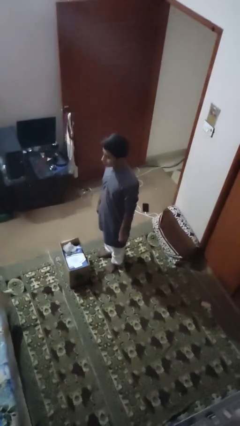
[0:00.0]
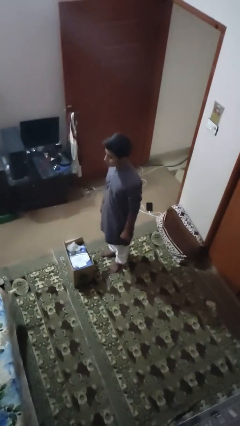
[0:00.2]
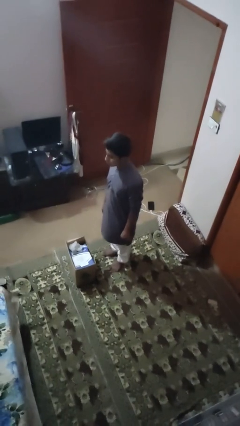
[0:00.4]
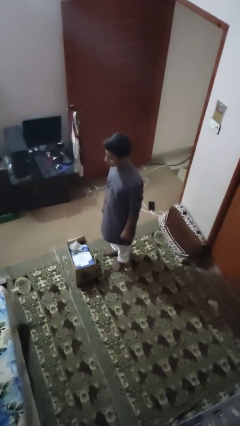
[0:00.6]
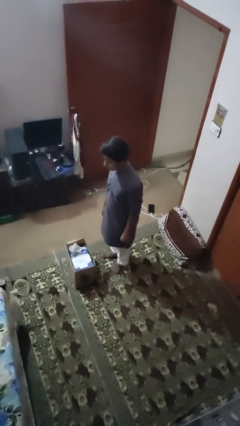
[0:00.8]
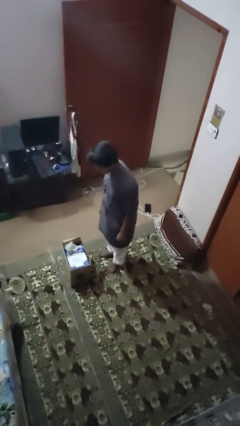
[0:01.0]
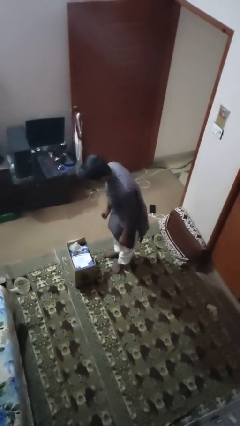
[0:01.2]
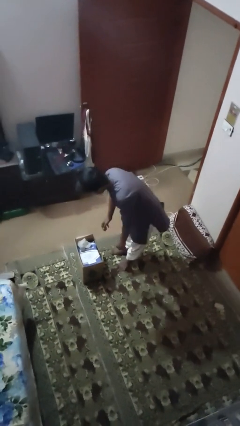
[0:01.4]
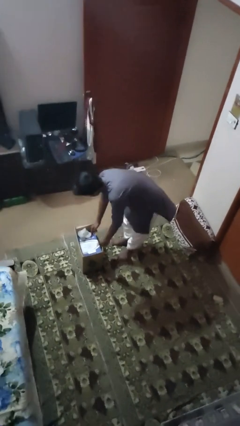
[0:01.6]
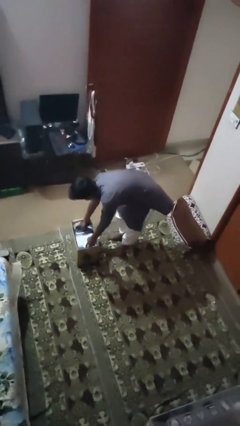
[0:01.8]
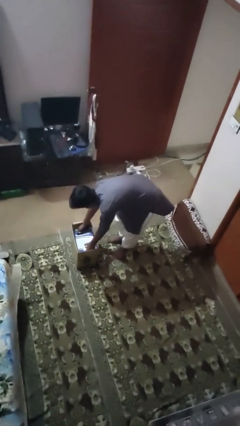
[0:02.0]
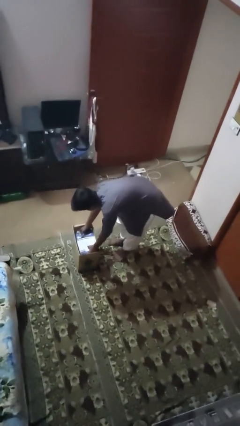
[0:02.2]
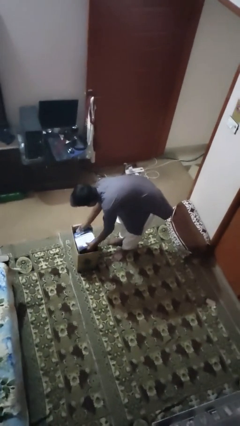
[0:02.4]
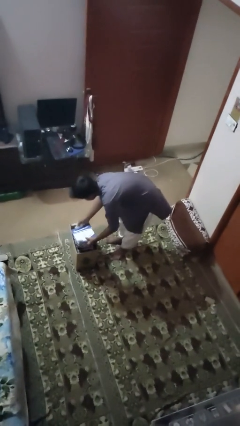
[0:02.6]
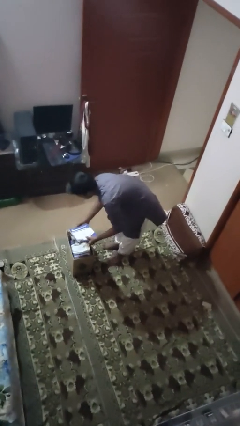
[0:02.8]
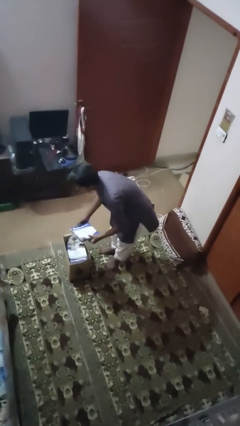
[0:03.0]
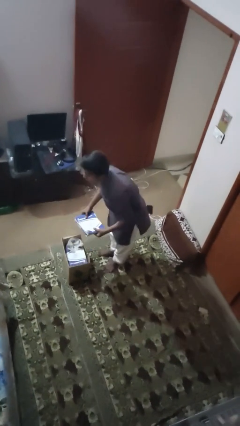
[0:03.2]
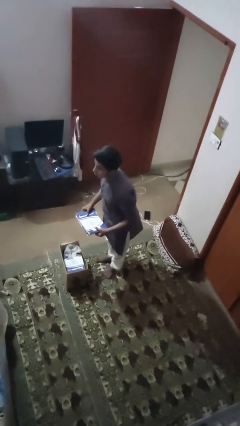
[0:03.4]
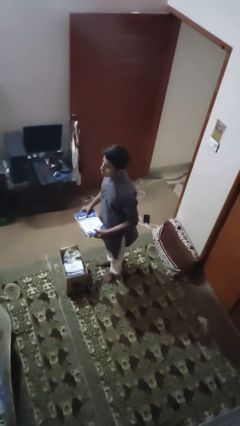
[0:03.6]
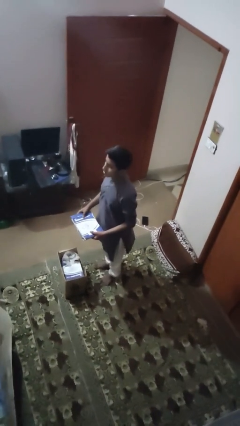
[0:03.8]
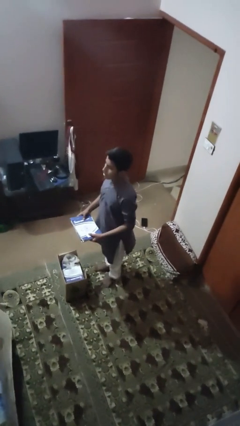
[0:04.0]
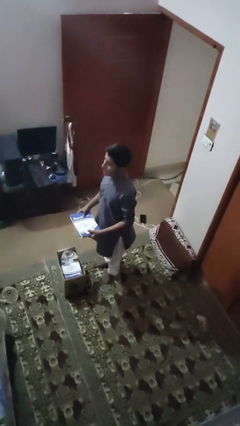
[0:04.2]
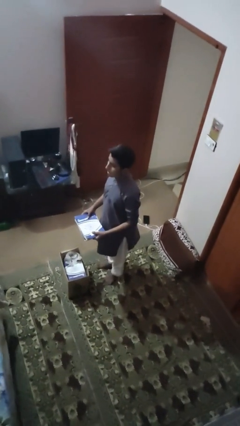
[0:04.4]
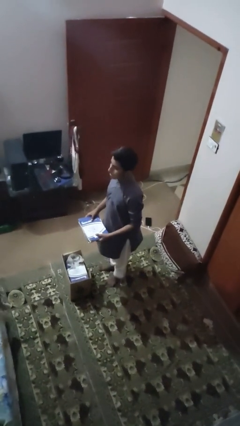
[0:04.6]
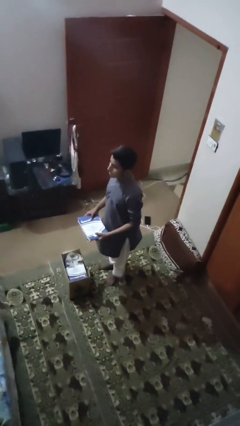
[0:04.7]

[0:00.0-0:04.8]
person takes object from box

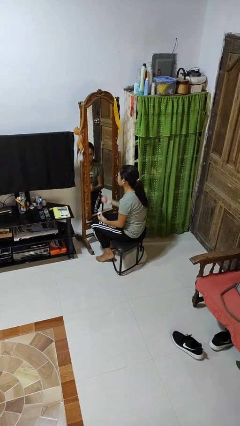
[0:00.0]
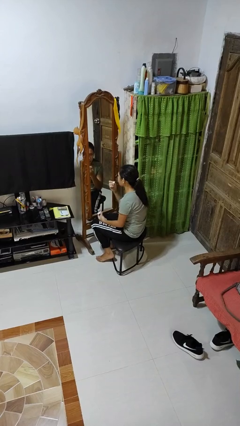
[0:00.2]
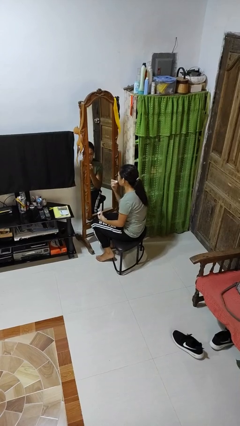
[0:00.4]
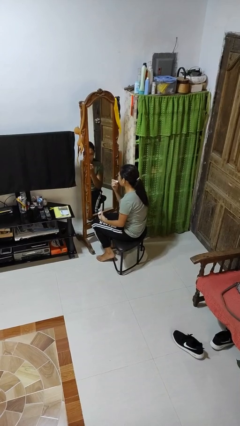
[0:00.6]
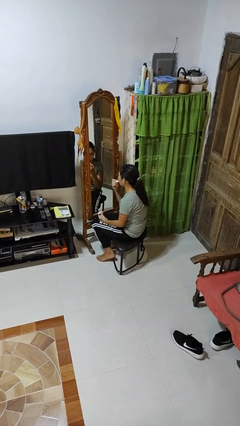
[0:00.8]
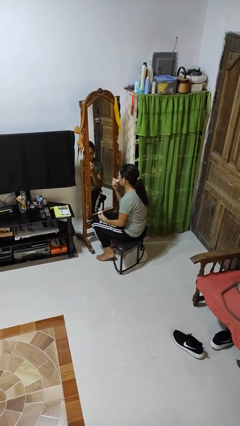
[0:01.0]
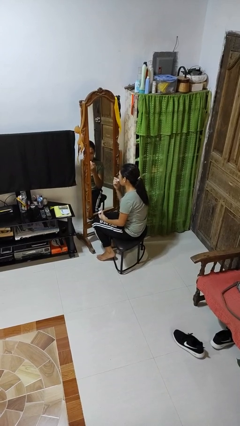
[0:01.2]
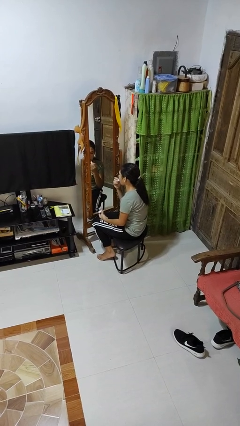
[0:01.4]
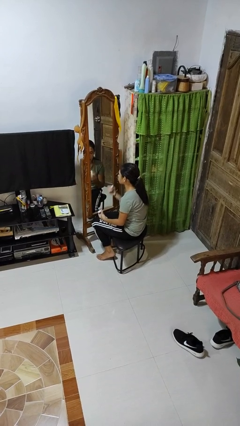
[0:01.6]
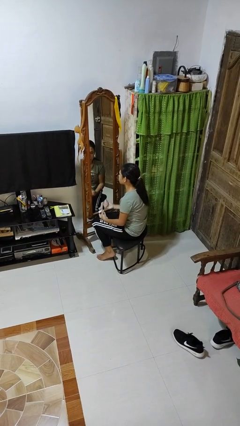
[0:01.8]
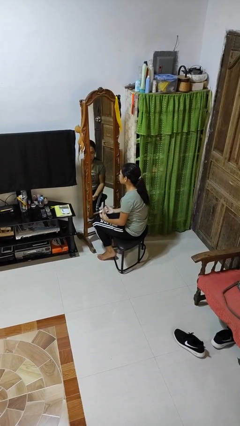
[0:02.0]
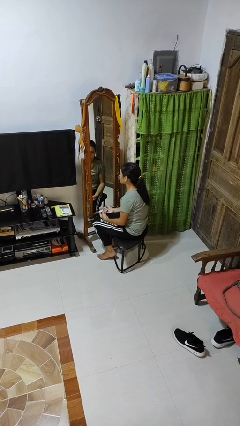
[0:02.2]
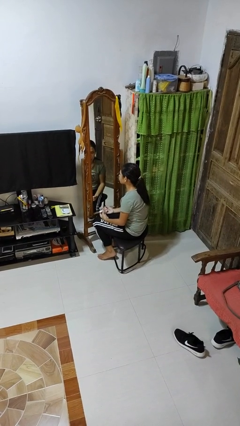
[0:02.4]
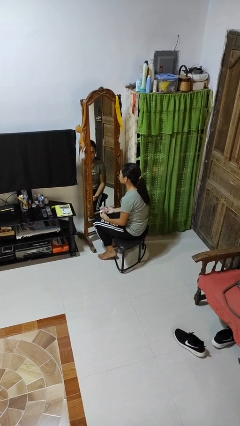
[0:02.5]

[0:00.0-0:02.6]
person applies lip makeup

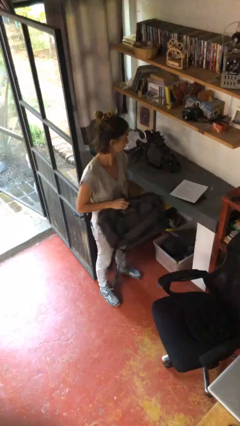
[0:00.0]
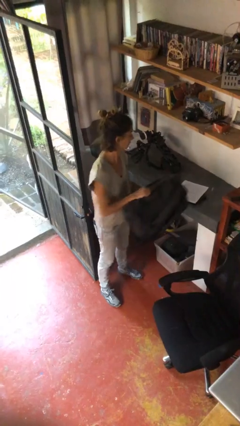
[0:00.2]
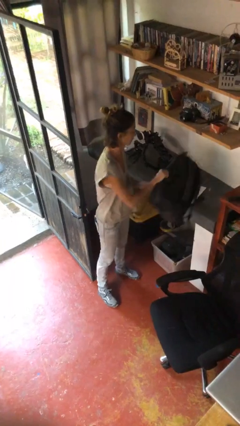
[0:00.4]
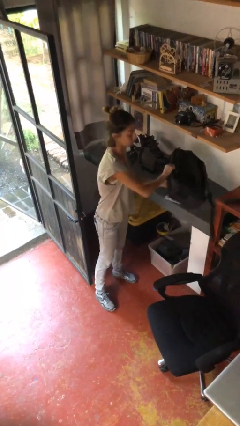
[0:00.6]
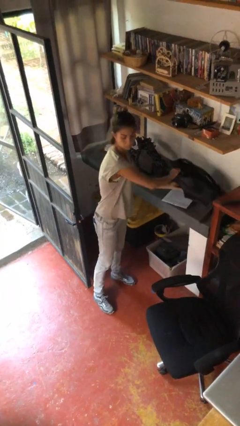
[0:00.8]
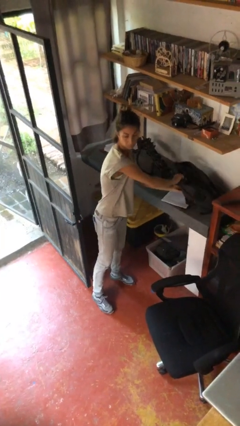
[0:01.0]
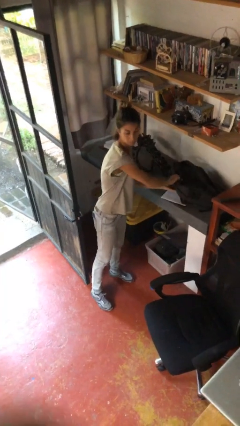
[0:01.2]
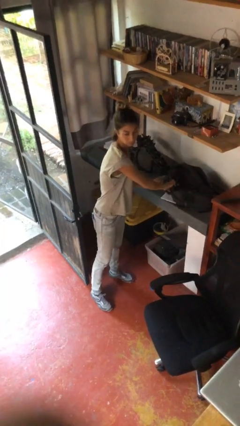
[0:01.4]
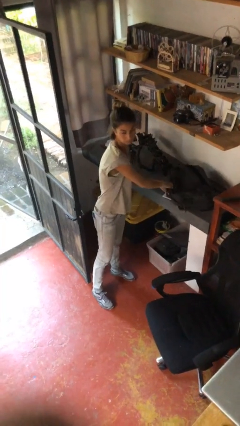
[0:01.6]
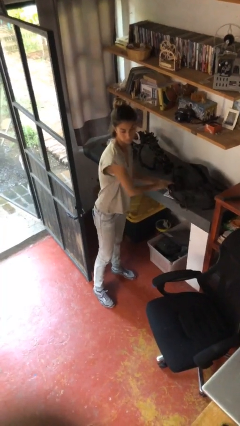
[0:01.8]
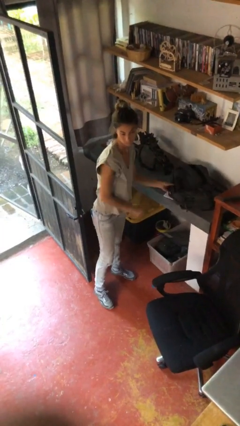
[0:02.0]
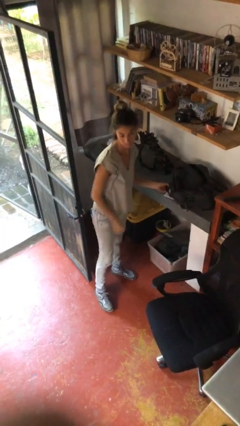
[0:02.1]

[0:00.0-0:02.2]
person puts down object on table

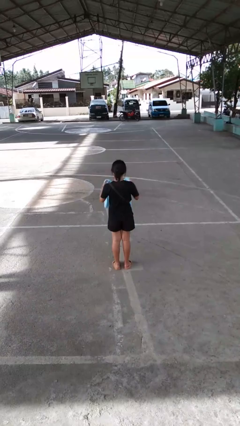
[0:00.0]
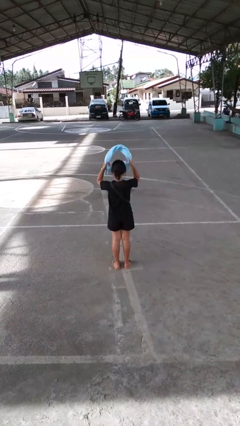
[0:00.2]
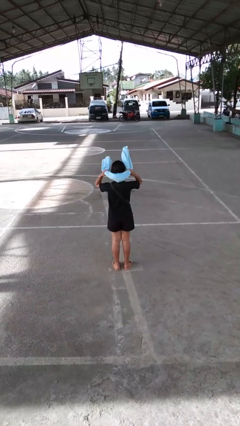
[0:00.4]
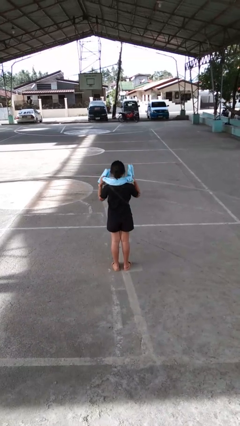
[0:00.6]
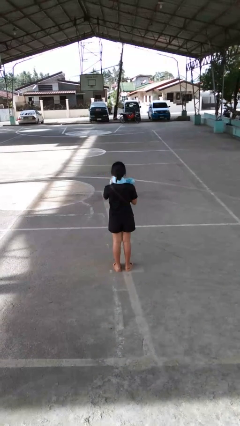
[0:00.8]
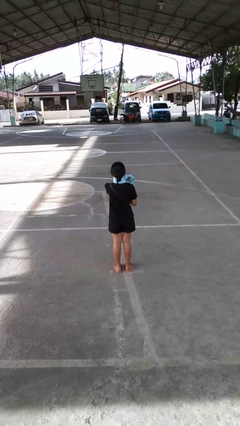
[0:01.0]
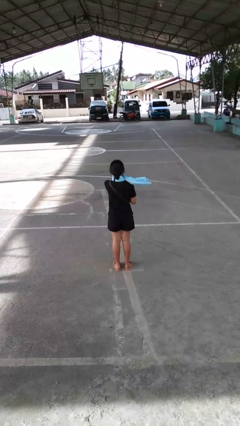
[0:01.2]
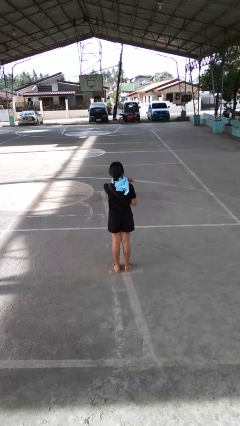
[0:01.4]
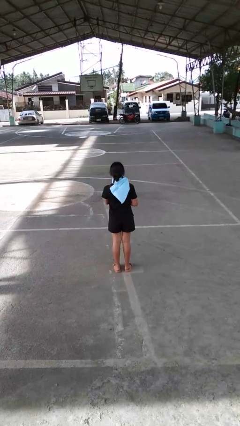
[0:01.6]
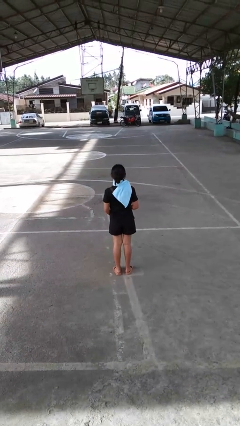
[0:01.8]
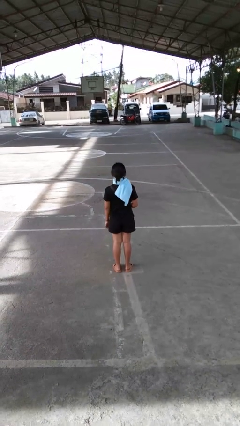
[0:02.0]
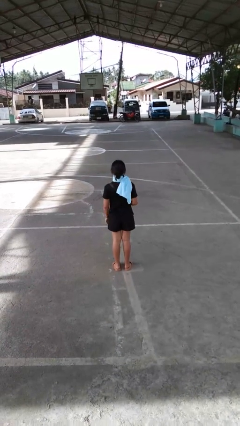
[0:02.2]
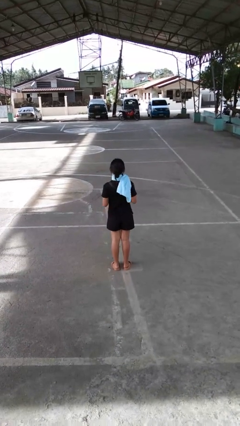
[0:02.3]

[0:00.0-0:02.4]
person puts on scarf

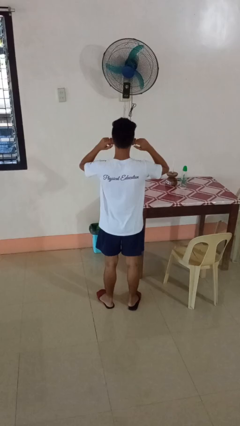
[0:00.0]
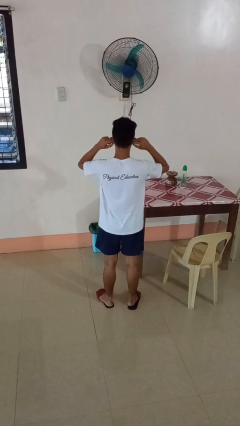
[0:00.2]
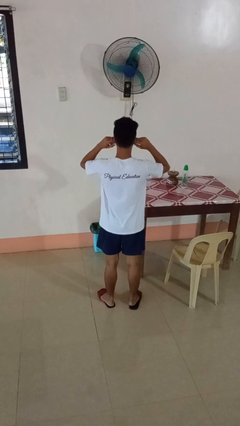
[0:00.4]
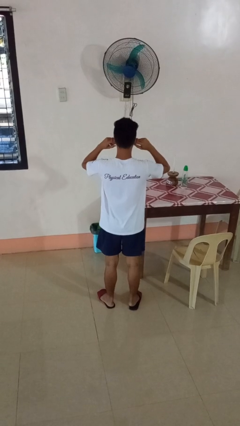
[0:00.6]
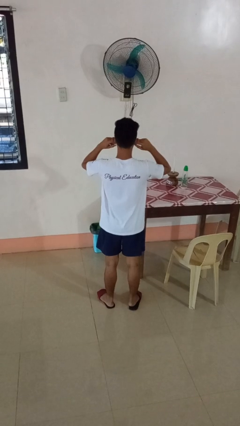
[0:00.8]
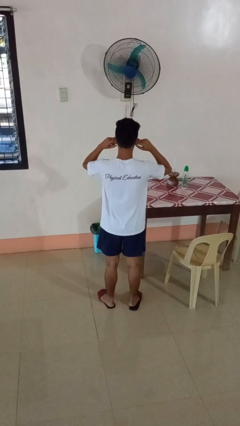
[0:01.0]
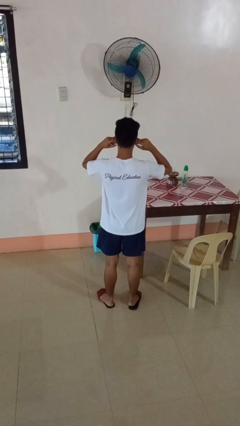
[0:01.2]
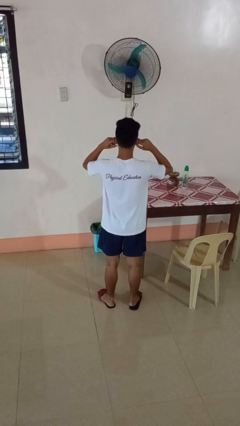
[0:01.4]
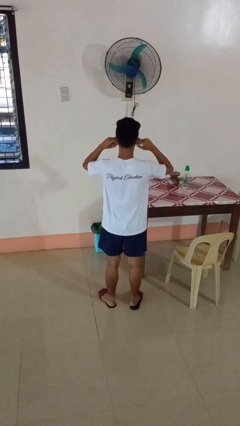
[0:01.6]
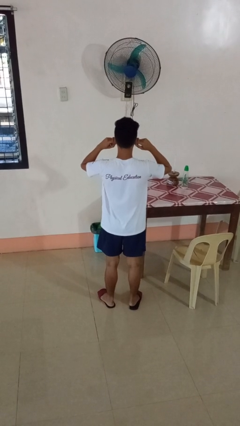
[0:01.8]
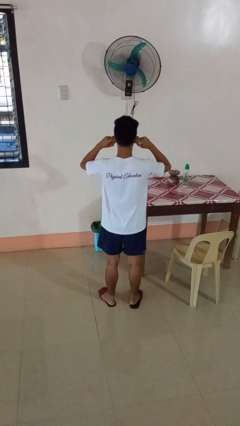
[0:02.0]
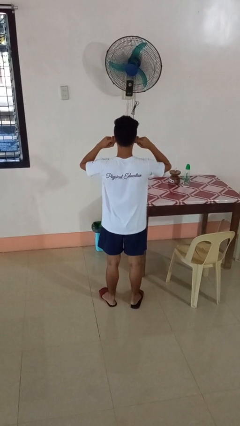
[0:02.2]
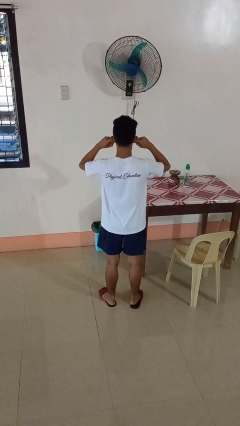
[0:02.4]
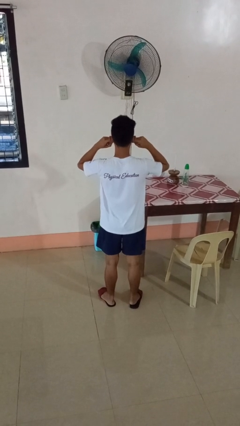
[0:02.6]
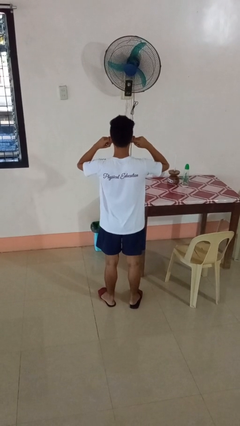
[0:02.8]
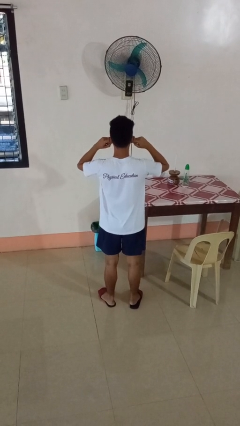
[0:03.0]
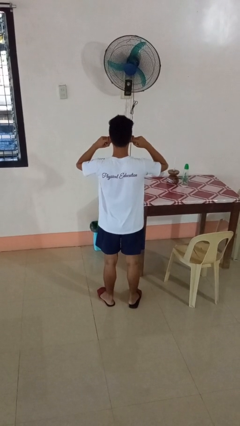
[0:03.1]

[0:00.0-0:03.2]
person puts fingers in ear

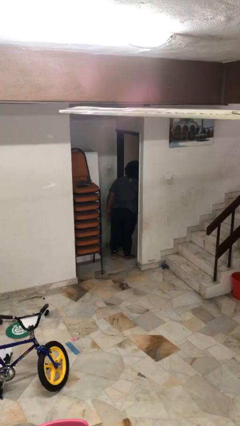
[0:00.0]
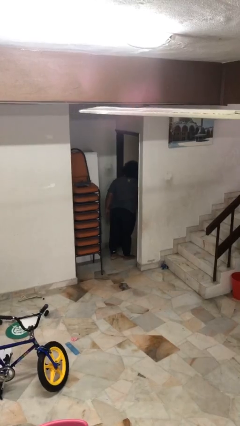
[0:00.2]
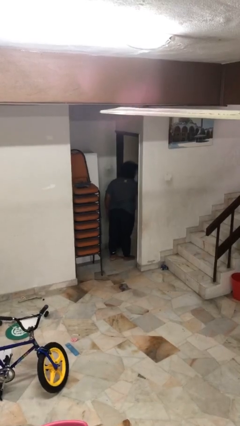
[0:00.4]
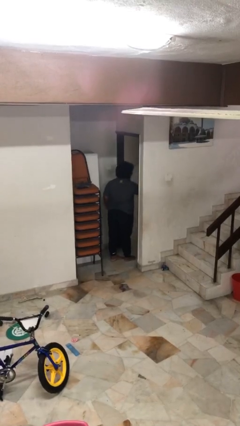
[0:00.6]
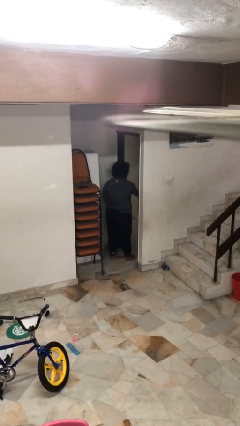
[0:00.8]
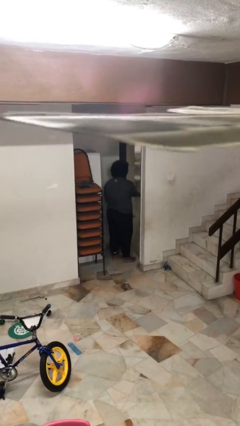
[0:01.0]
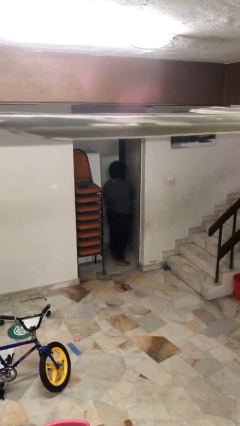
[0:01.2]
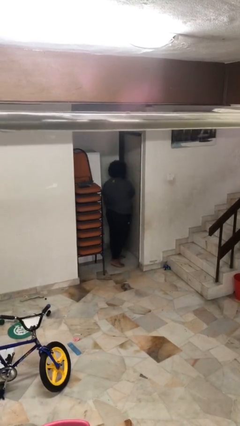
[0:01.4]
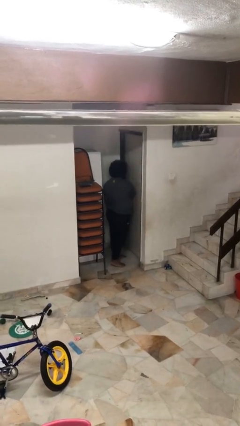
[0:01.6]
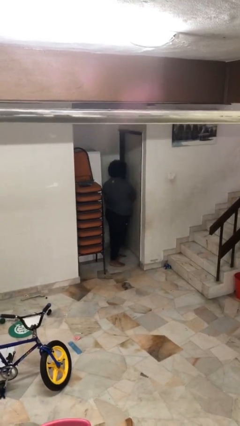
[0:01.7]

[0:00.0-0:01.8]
person closes facility door

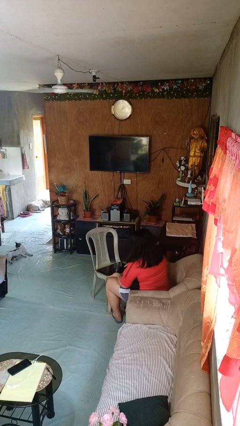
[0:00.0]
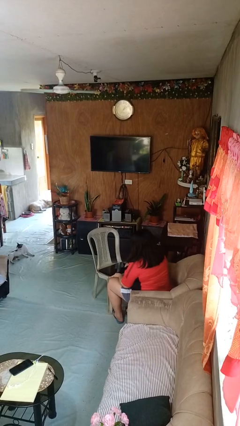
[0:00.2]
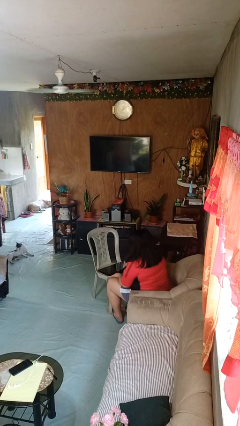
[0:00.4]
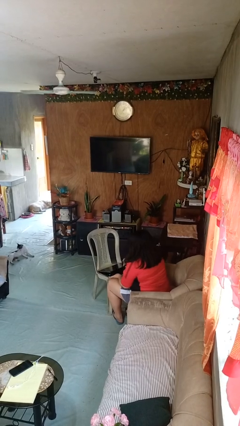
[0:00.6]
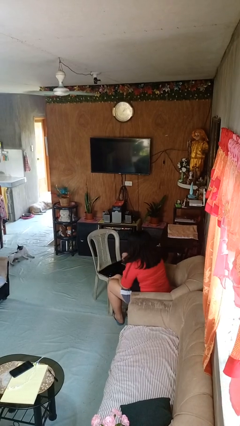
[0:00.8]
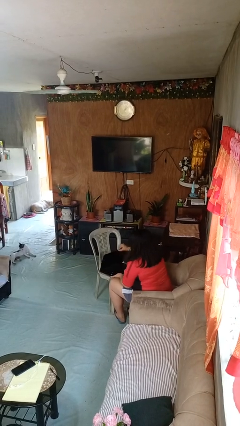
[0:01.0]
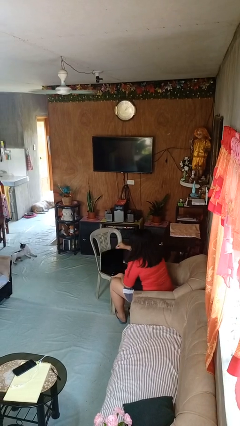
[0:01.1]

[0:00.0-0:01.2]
person opens laptop
